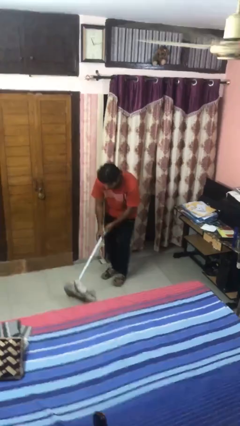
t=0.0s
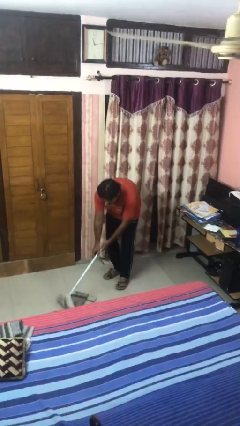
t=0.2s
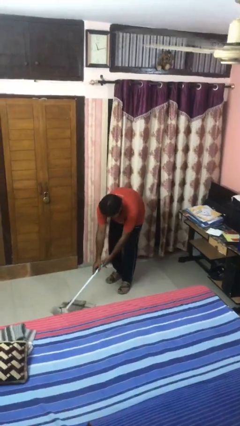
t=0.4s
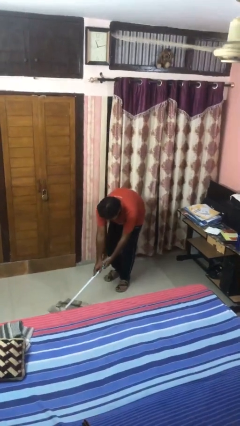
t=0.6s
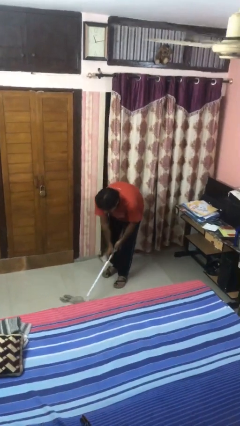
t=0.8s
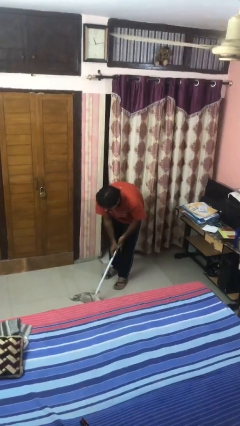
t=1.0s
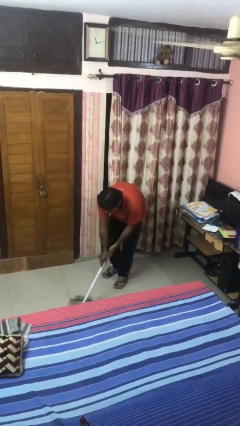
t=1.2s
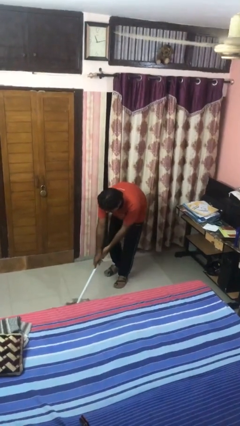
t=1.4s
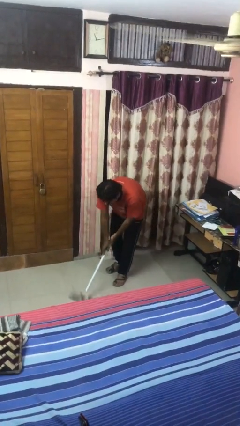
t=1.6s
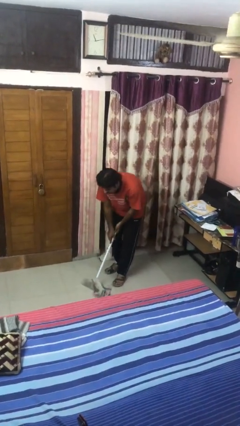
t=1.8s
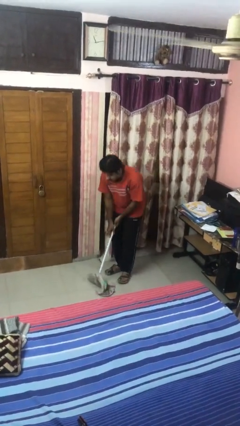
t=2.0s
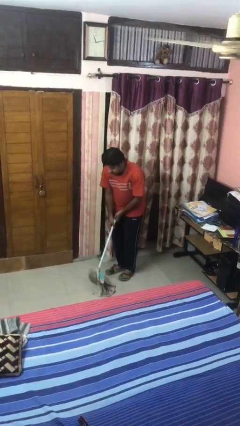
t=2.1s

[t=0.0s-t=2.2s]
person mops

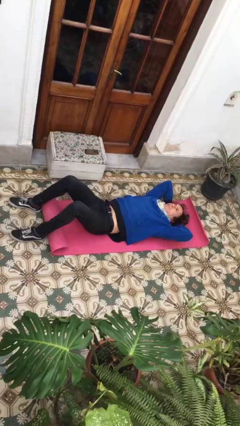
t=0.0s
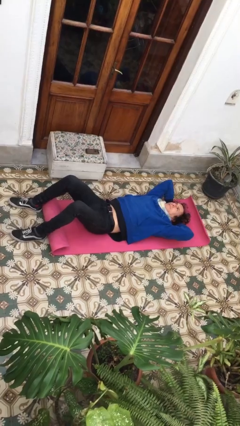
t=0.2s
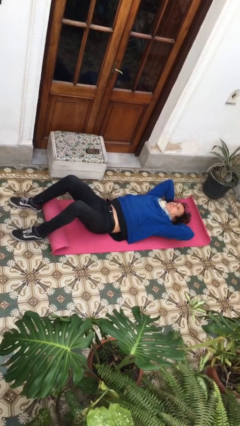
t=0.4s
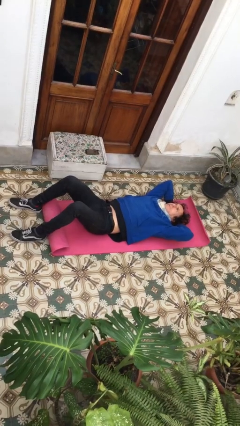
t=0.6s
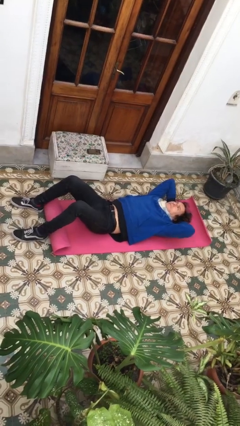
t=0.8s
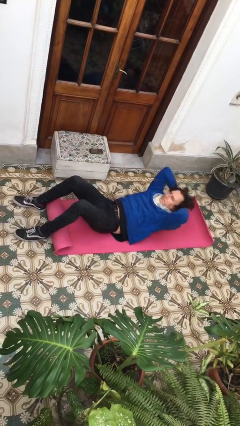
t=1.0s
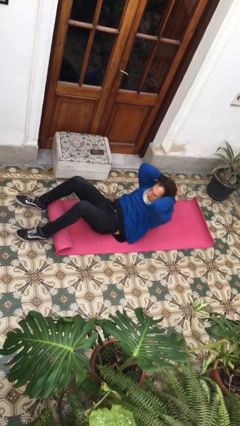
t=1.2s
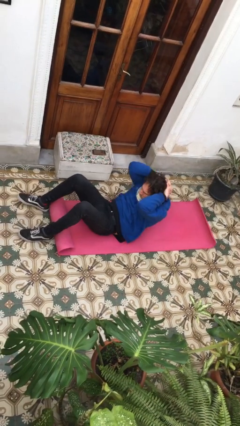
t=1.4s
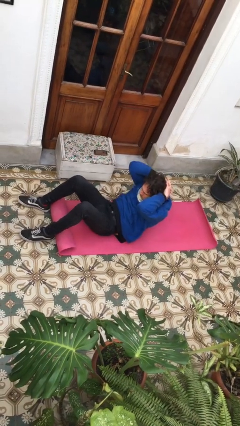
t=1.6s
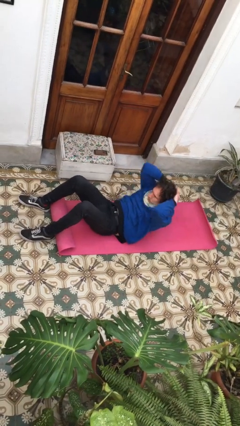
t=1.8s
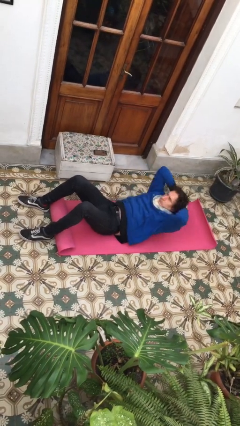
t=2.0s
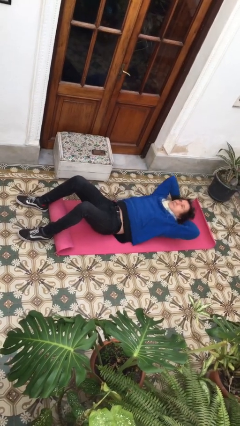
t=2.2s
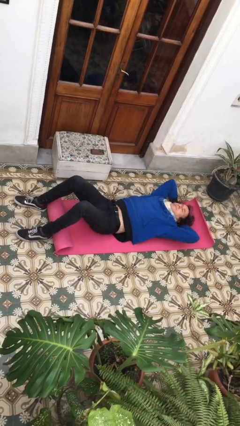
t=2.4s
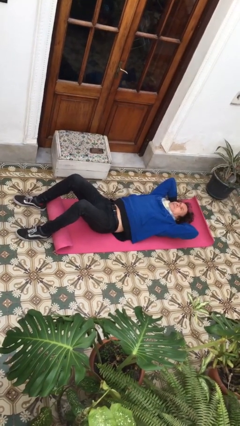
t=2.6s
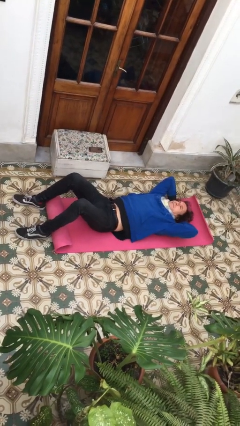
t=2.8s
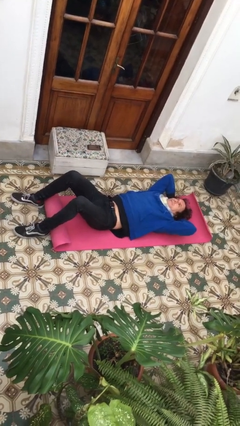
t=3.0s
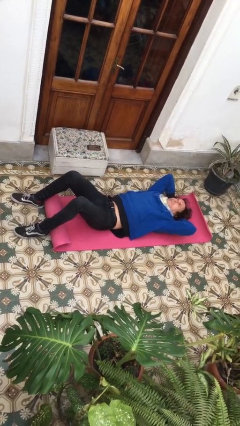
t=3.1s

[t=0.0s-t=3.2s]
person exercises with situp

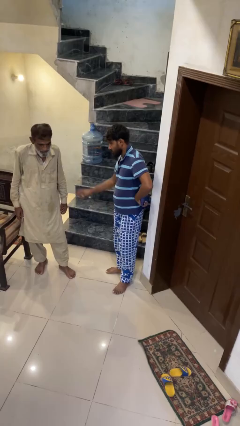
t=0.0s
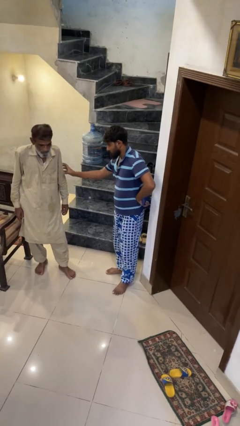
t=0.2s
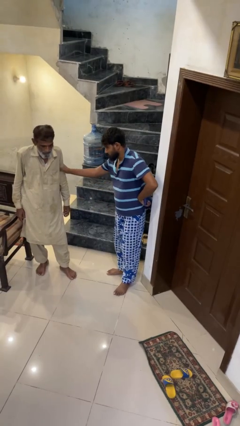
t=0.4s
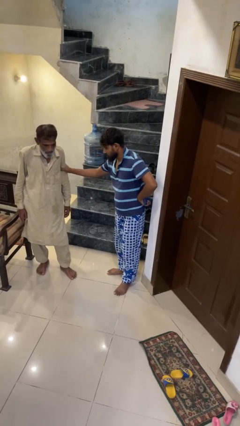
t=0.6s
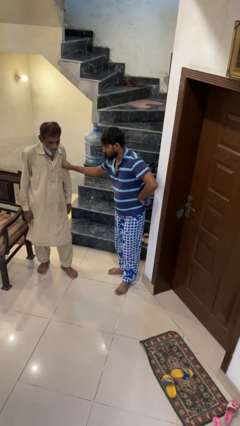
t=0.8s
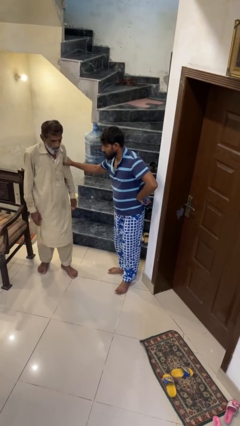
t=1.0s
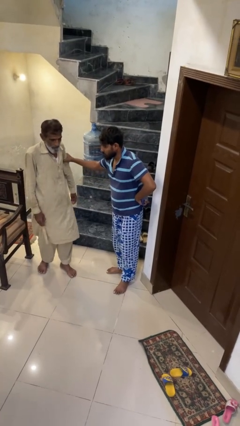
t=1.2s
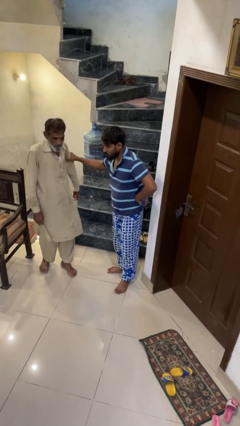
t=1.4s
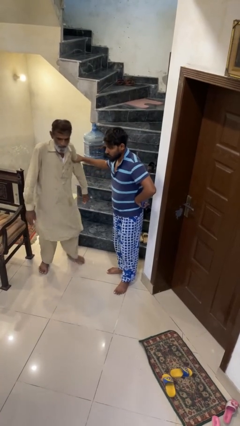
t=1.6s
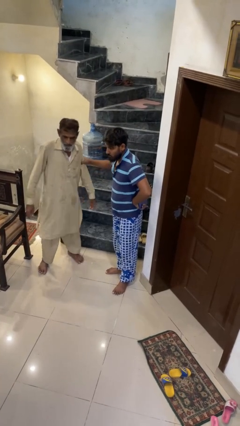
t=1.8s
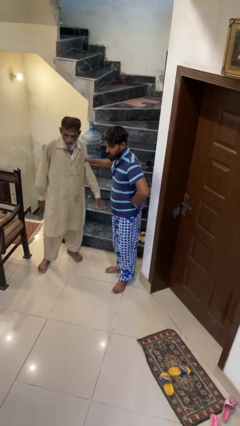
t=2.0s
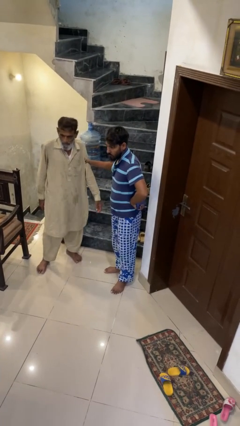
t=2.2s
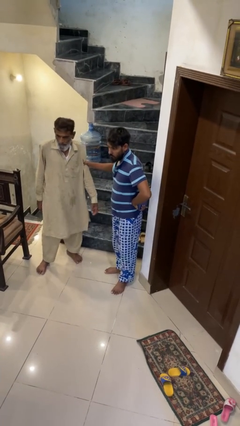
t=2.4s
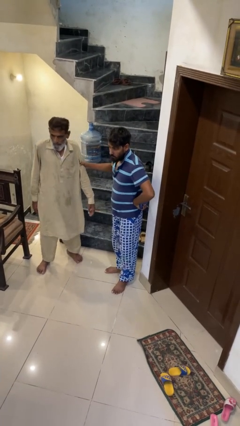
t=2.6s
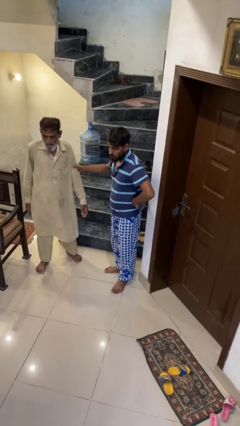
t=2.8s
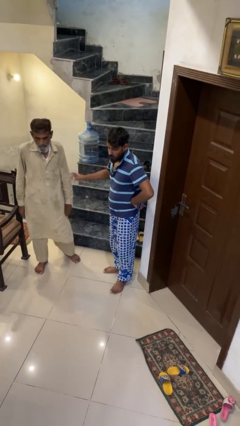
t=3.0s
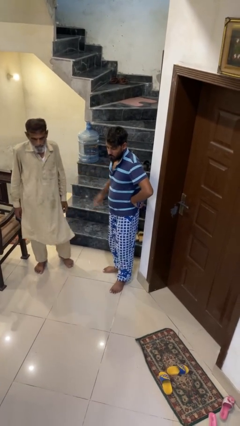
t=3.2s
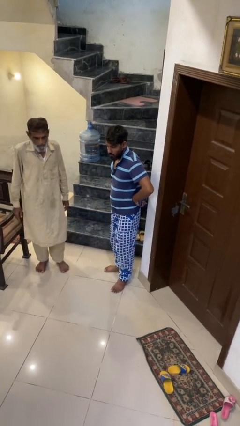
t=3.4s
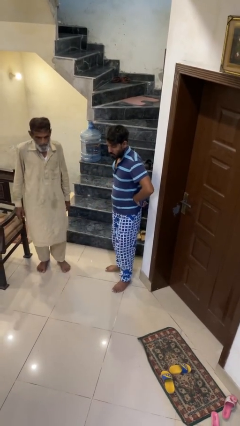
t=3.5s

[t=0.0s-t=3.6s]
person grabs person by bicep

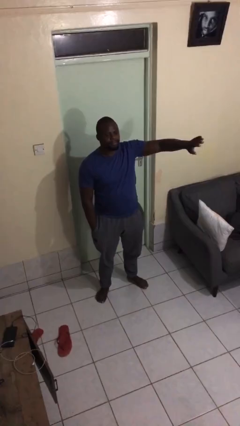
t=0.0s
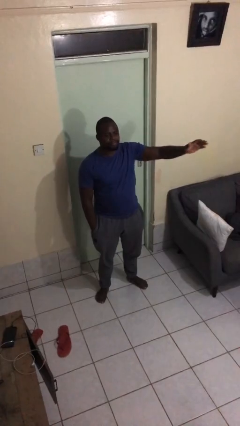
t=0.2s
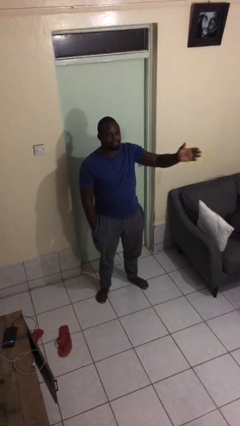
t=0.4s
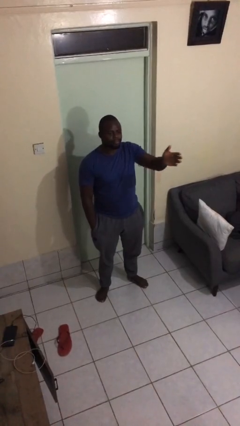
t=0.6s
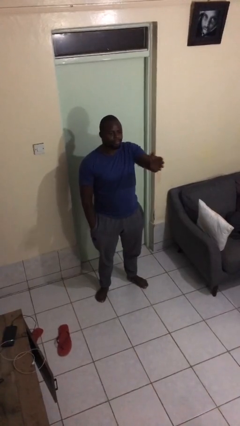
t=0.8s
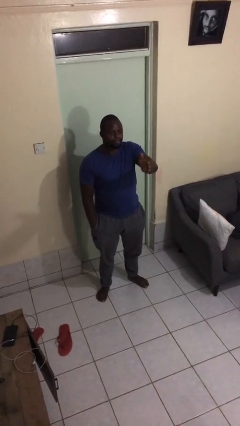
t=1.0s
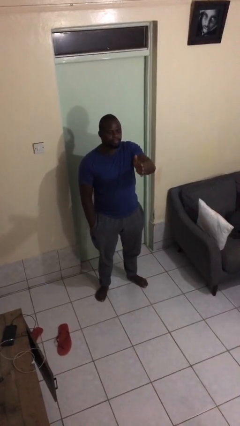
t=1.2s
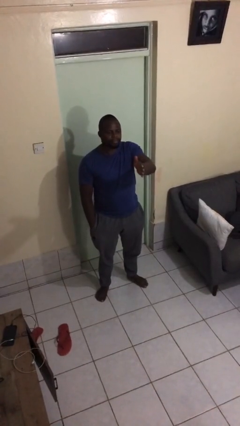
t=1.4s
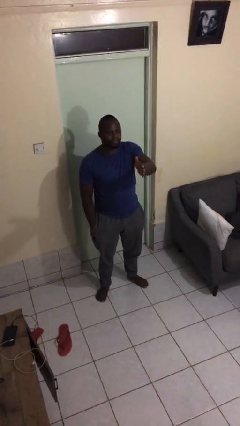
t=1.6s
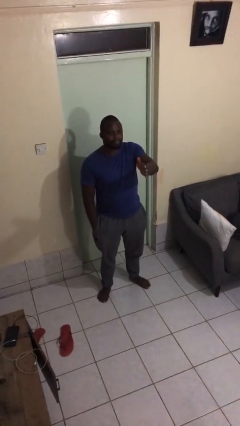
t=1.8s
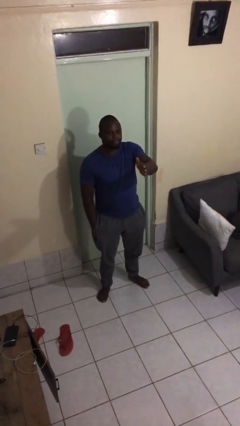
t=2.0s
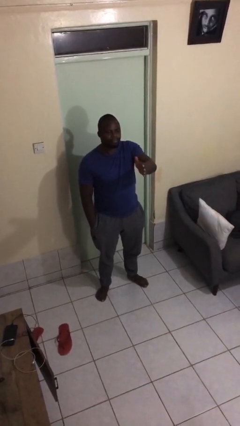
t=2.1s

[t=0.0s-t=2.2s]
person gestures swipe right

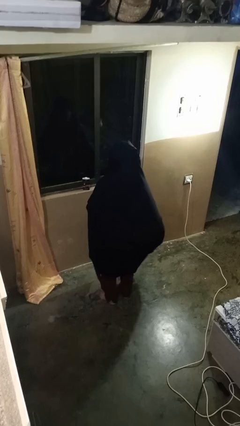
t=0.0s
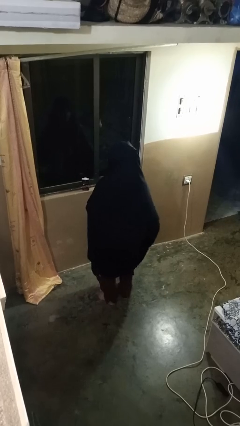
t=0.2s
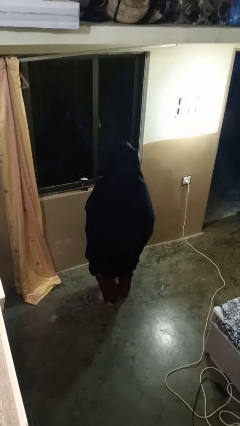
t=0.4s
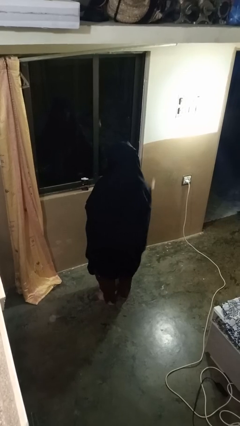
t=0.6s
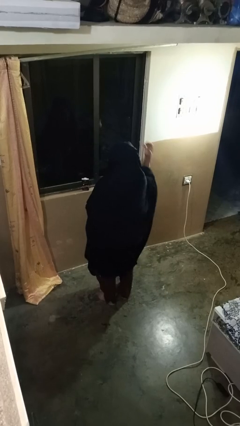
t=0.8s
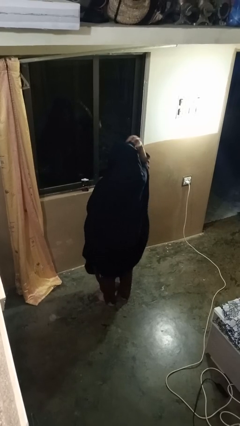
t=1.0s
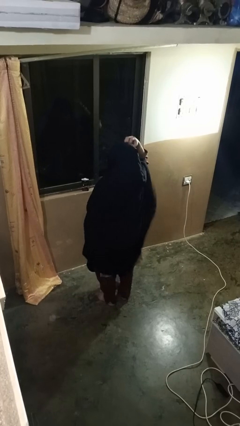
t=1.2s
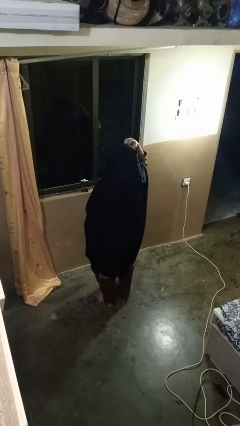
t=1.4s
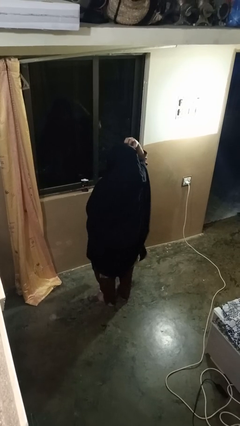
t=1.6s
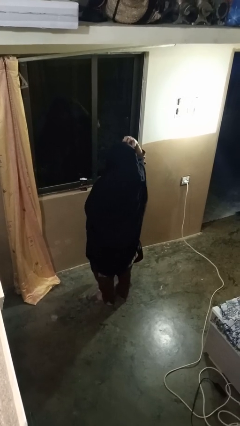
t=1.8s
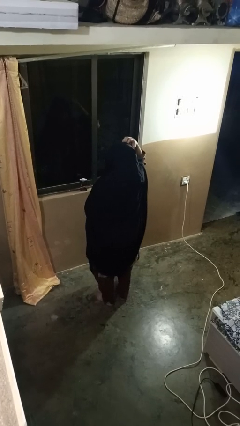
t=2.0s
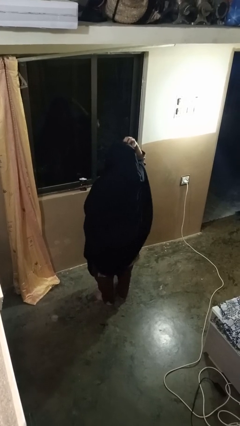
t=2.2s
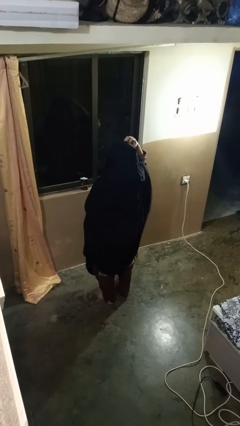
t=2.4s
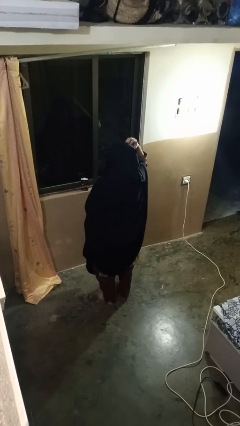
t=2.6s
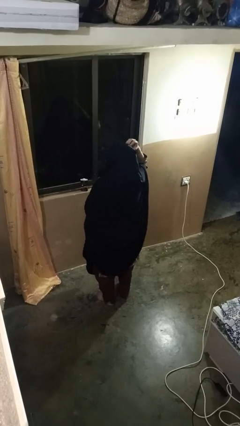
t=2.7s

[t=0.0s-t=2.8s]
person scratches face

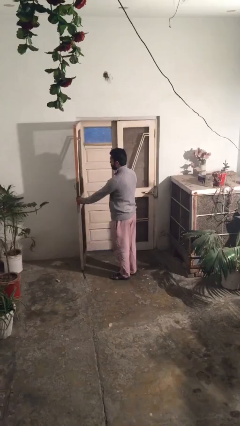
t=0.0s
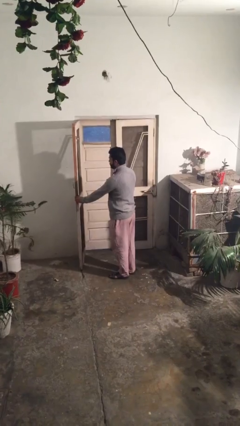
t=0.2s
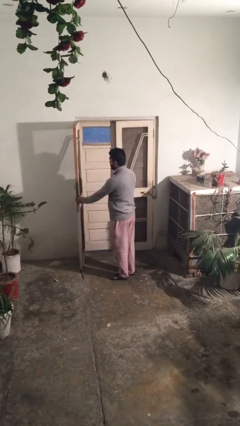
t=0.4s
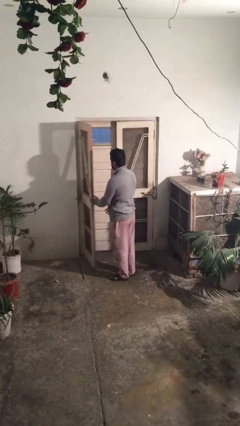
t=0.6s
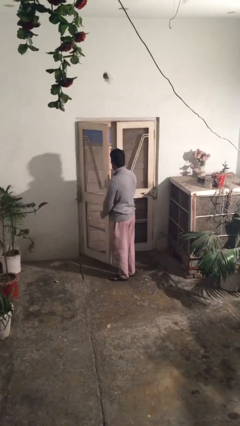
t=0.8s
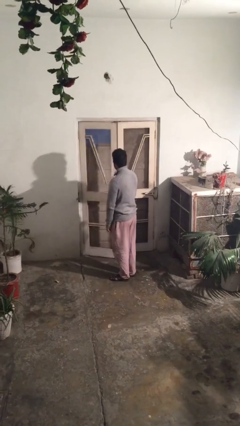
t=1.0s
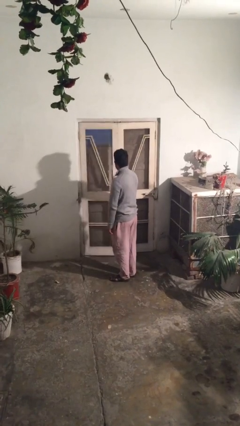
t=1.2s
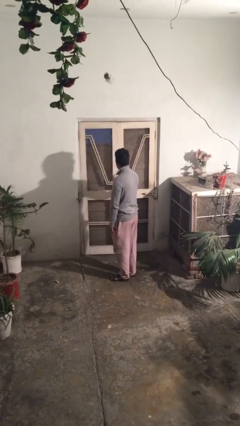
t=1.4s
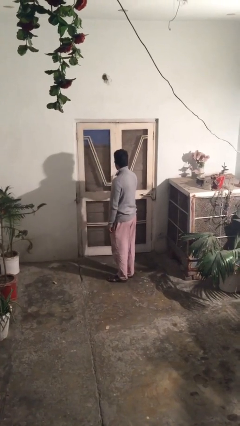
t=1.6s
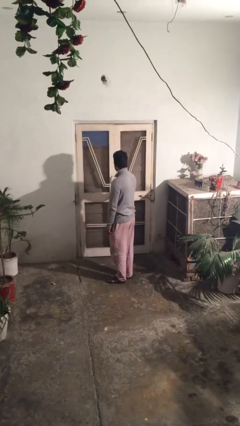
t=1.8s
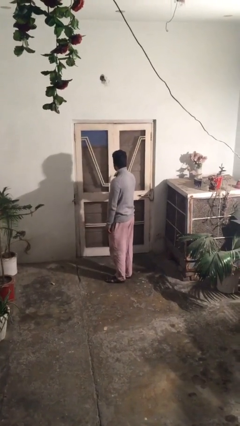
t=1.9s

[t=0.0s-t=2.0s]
person closes facility door

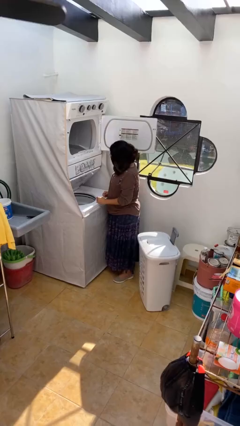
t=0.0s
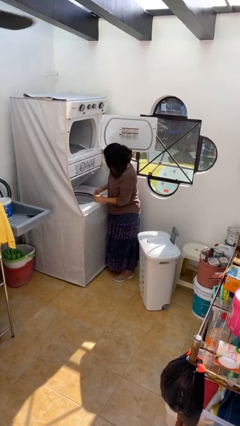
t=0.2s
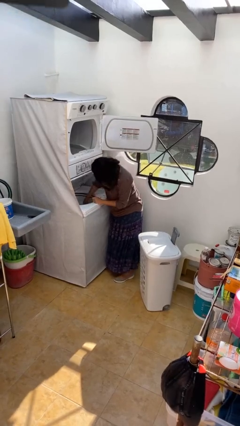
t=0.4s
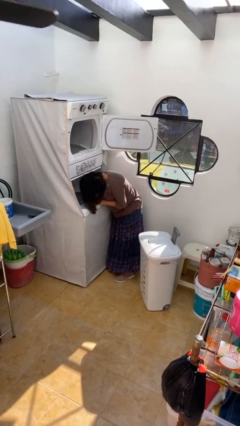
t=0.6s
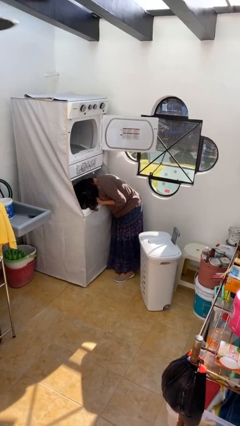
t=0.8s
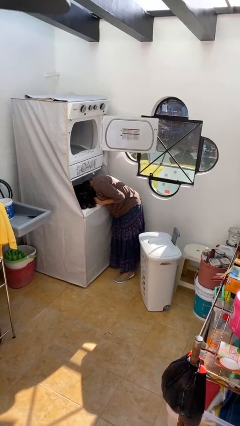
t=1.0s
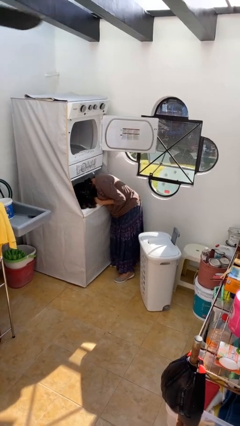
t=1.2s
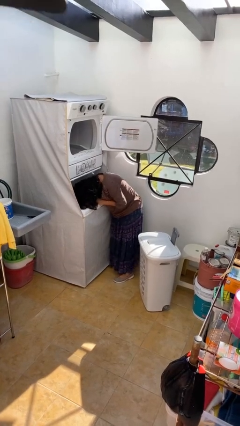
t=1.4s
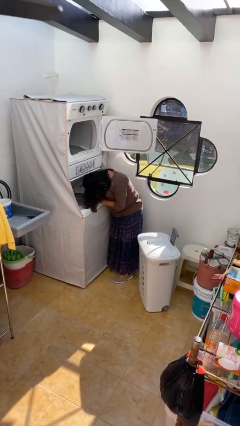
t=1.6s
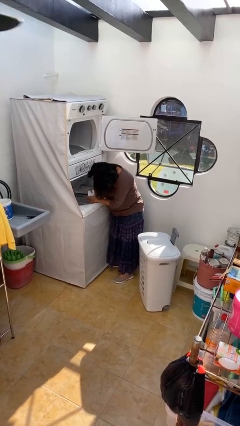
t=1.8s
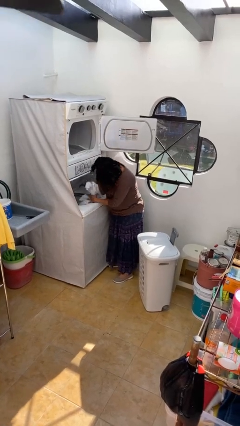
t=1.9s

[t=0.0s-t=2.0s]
person unloads clotheswasher
